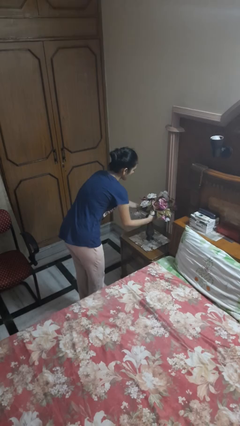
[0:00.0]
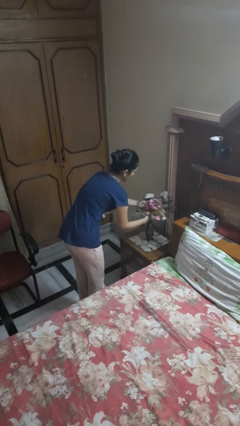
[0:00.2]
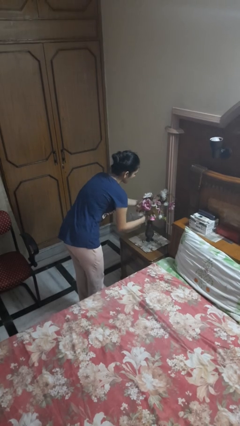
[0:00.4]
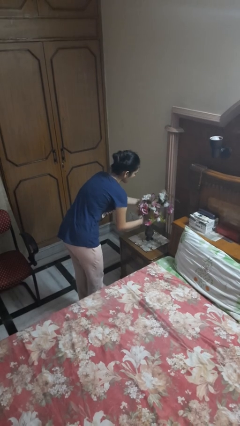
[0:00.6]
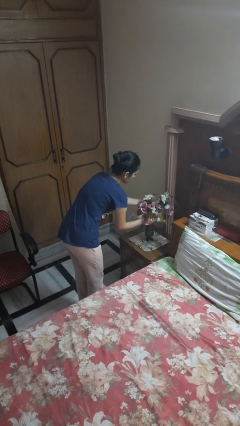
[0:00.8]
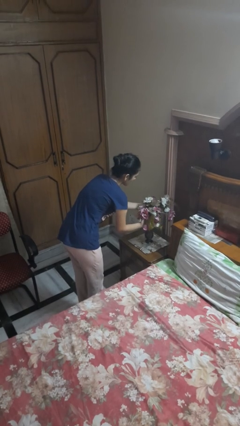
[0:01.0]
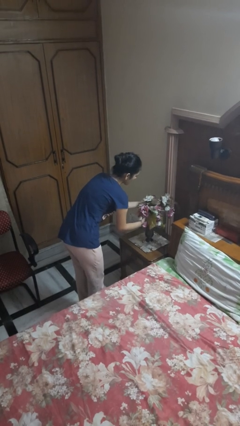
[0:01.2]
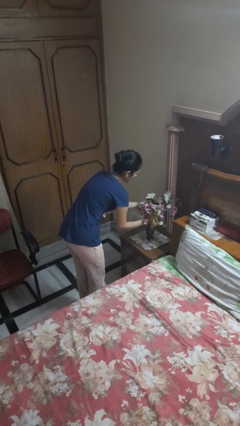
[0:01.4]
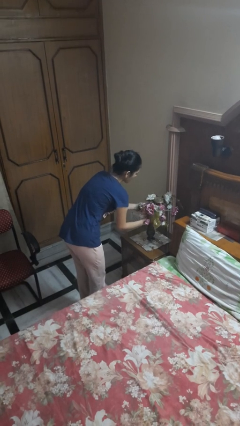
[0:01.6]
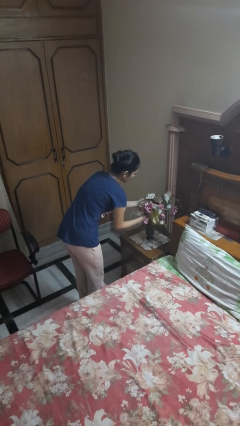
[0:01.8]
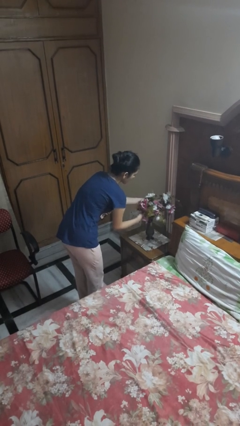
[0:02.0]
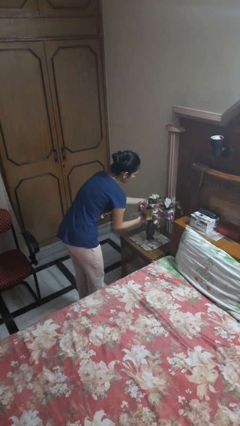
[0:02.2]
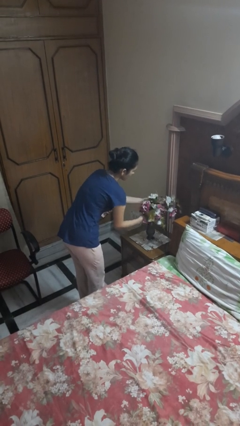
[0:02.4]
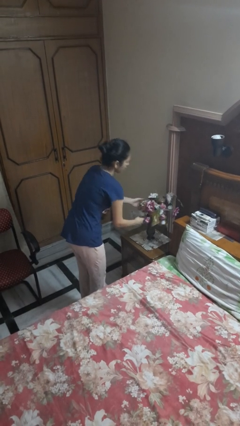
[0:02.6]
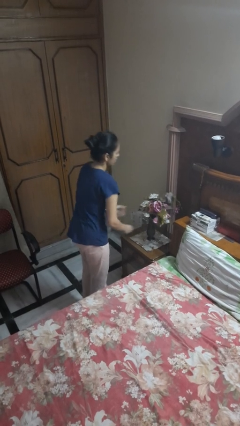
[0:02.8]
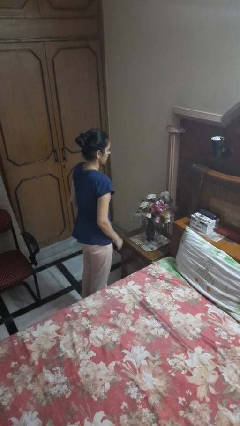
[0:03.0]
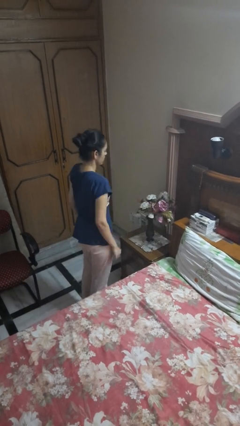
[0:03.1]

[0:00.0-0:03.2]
person arranges flowers in vase

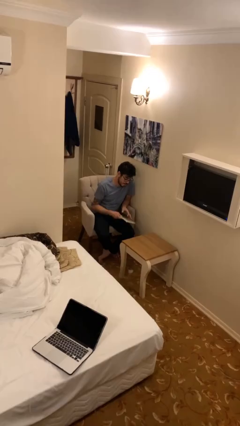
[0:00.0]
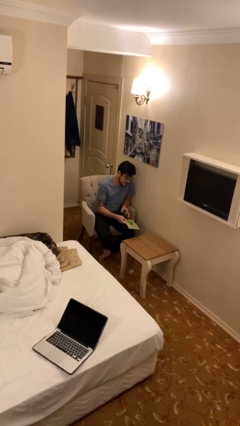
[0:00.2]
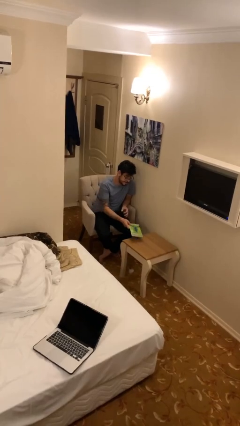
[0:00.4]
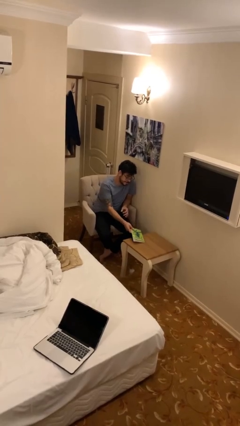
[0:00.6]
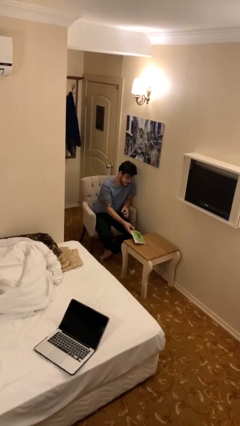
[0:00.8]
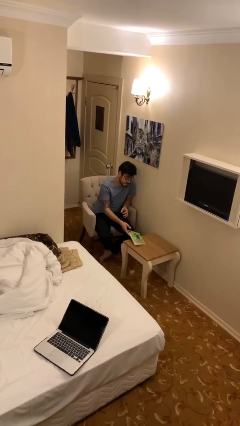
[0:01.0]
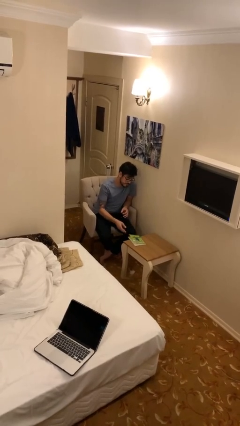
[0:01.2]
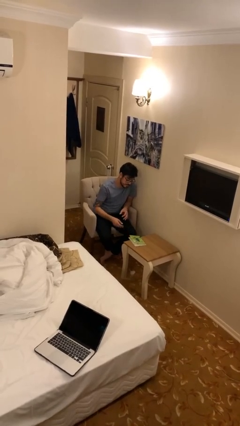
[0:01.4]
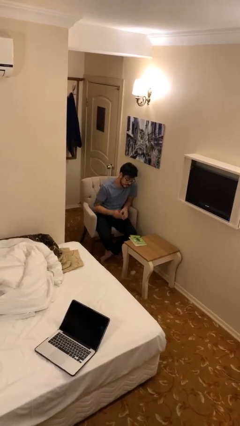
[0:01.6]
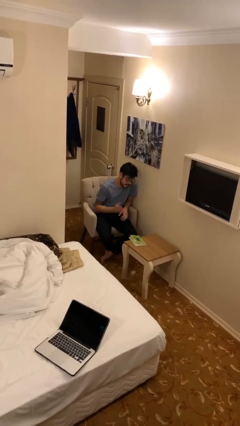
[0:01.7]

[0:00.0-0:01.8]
person puts down object on table

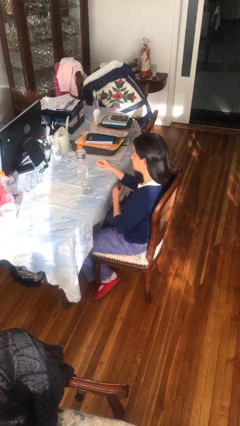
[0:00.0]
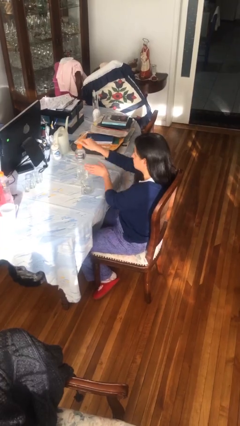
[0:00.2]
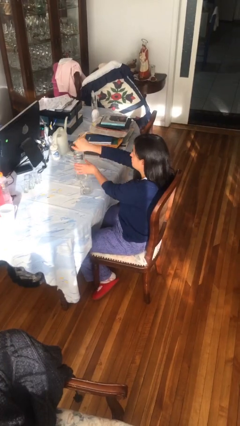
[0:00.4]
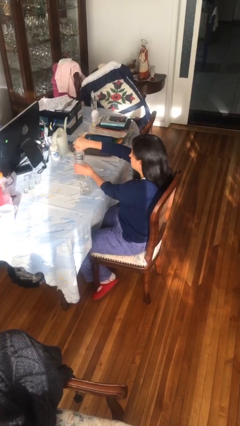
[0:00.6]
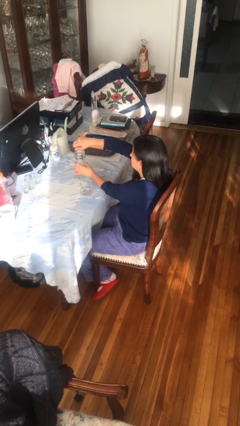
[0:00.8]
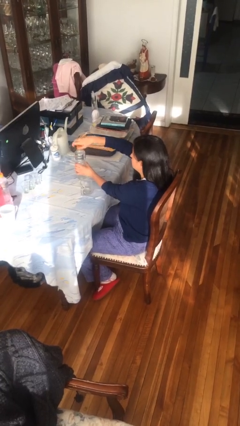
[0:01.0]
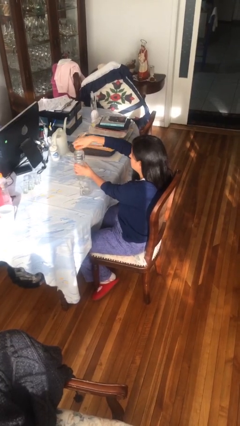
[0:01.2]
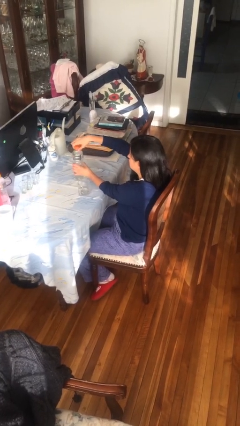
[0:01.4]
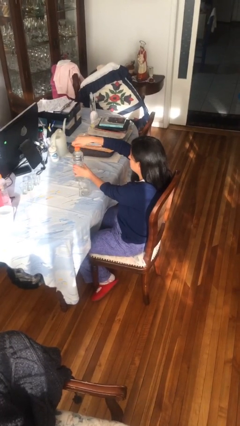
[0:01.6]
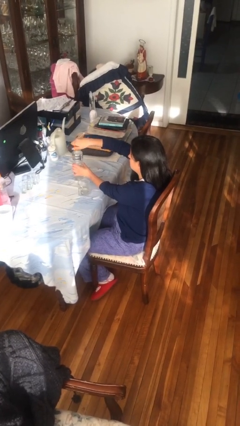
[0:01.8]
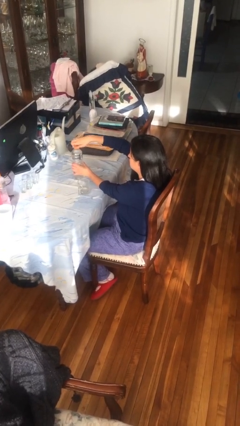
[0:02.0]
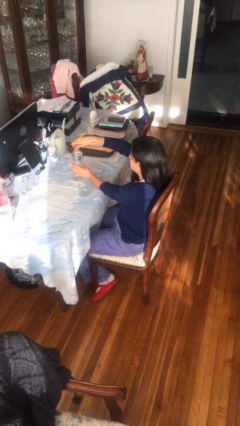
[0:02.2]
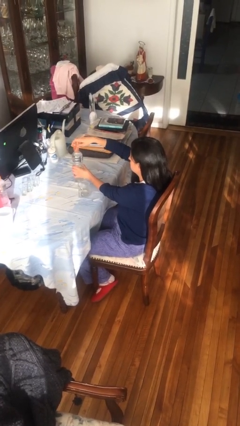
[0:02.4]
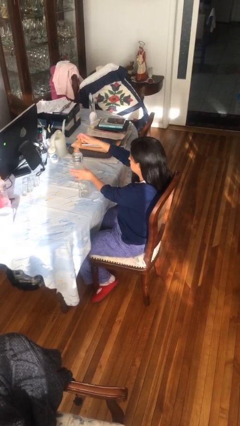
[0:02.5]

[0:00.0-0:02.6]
person unscrews lid from bottle

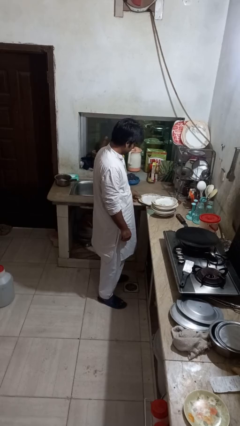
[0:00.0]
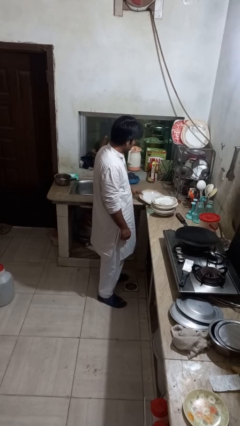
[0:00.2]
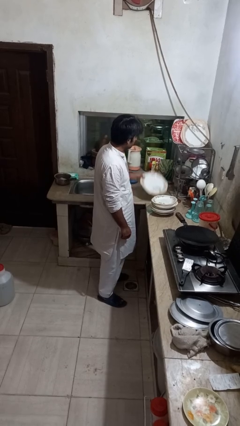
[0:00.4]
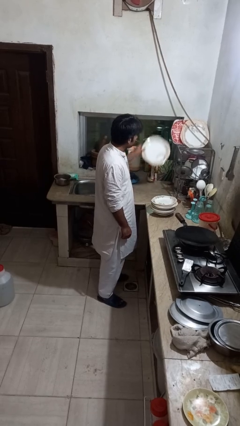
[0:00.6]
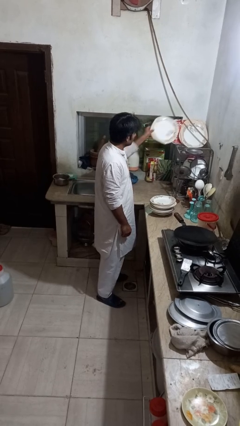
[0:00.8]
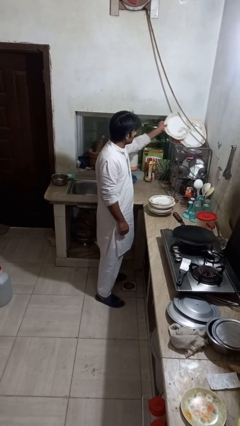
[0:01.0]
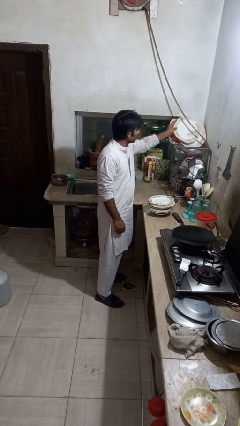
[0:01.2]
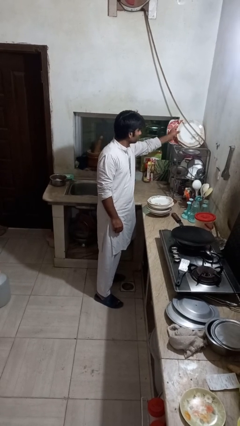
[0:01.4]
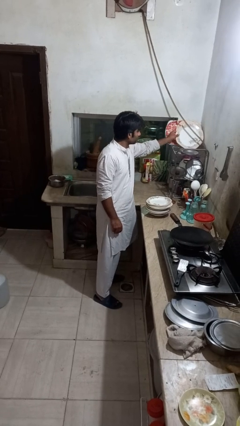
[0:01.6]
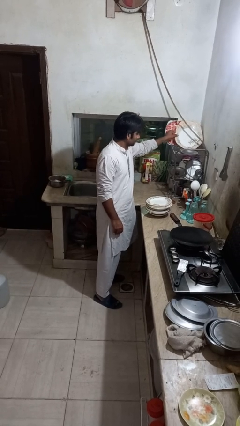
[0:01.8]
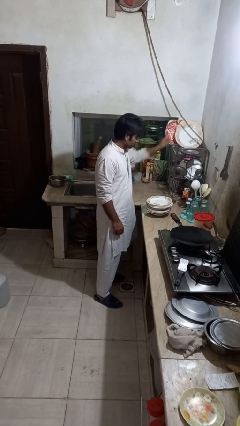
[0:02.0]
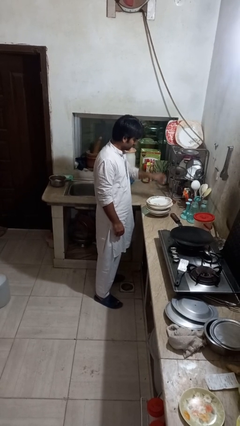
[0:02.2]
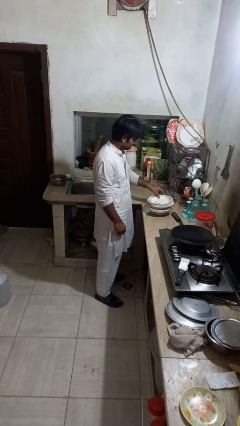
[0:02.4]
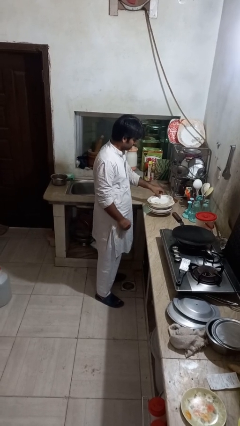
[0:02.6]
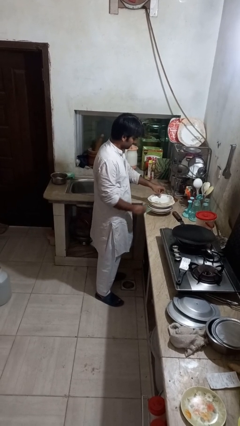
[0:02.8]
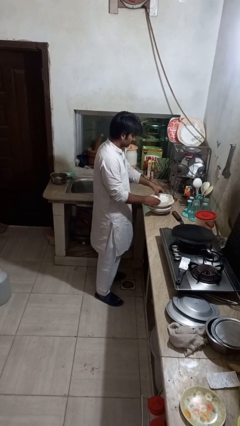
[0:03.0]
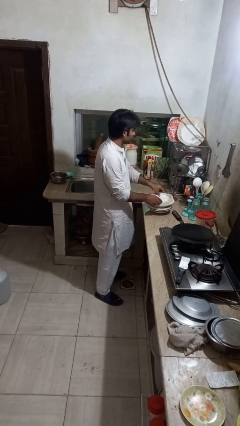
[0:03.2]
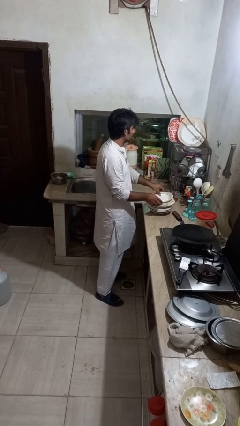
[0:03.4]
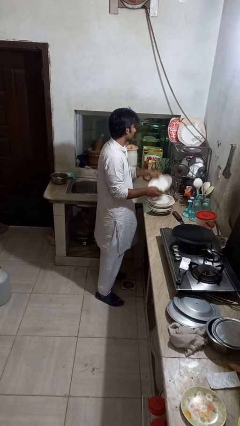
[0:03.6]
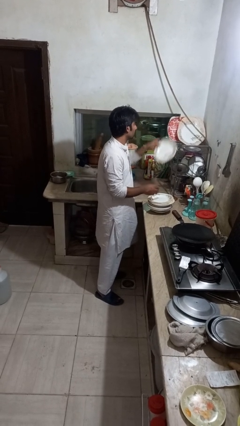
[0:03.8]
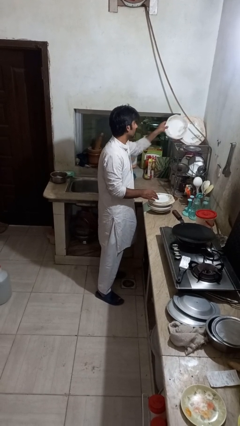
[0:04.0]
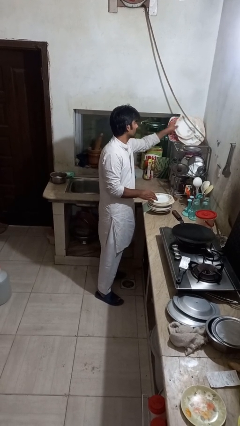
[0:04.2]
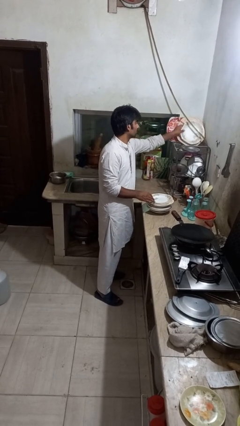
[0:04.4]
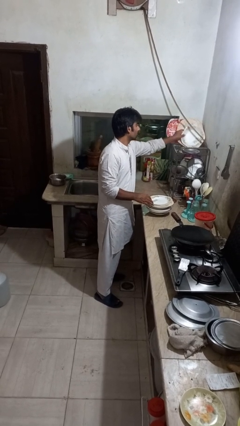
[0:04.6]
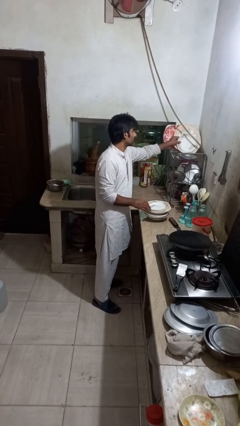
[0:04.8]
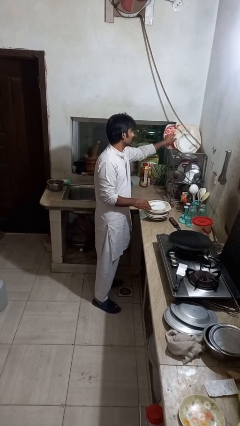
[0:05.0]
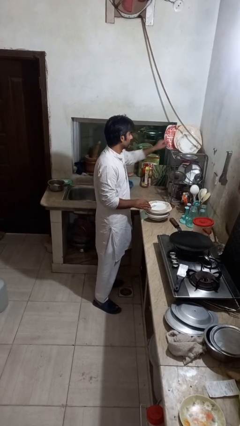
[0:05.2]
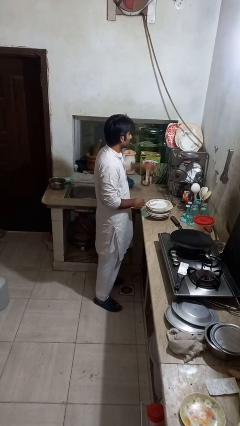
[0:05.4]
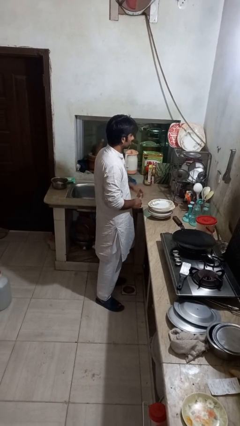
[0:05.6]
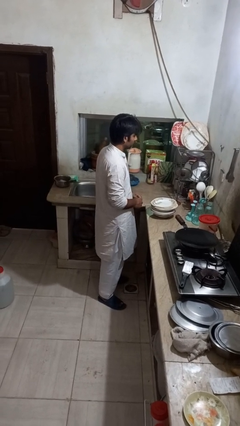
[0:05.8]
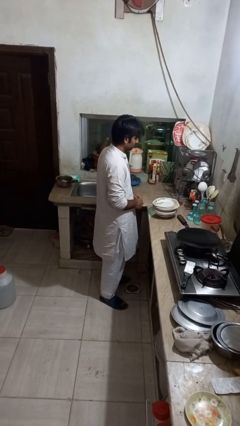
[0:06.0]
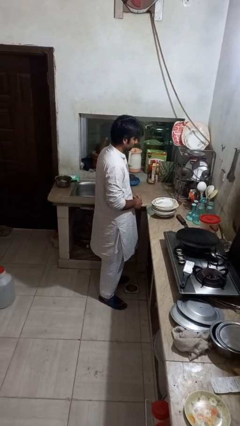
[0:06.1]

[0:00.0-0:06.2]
person loads dishwasher

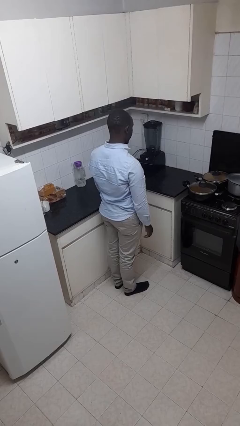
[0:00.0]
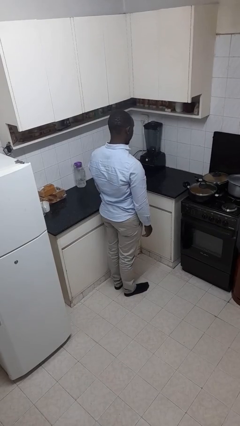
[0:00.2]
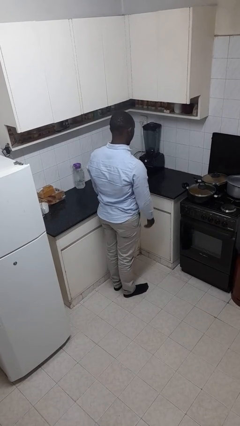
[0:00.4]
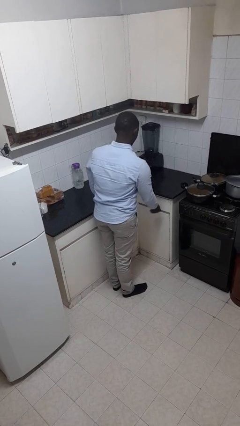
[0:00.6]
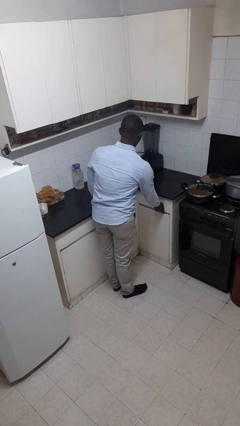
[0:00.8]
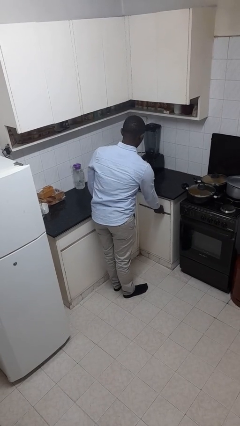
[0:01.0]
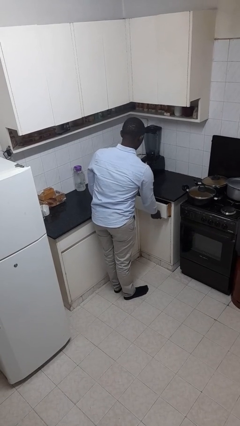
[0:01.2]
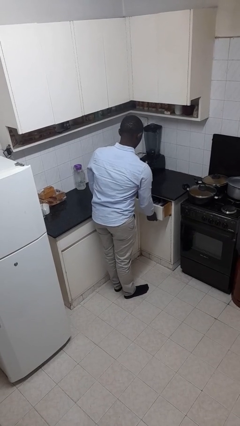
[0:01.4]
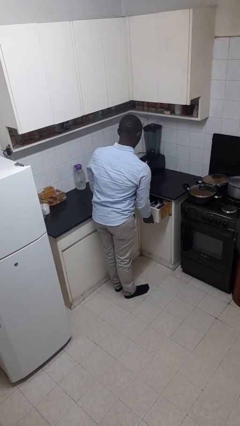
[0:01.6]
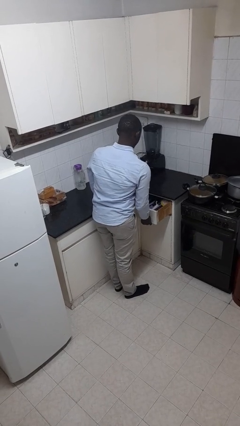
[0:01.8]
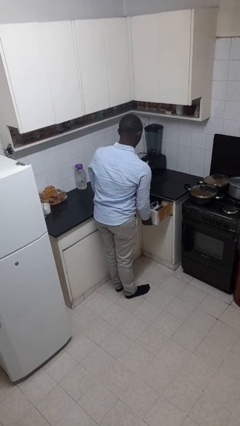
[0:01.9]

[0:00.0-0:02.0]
person opens kitchen drawer

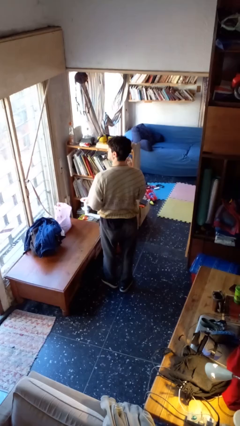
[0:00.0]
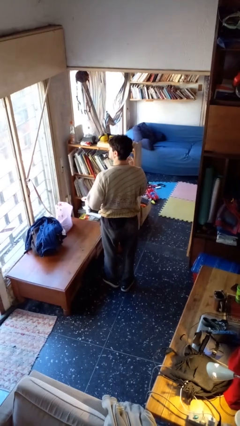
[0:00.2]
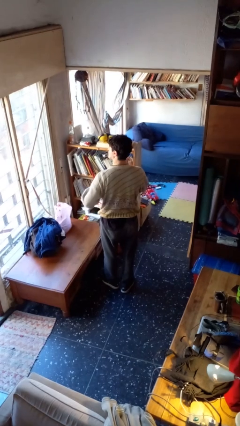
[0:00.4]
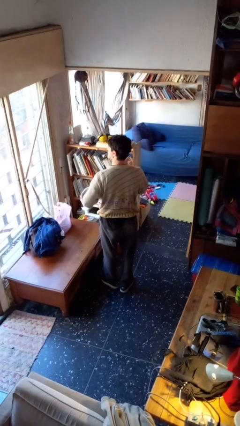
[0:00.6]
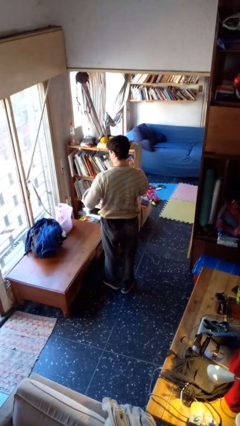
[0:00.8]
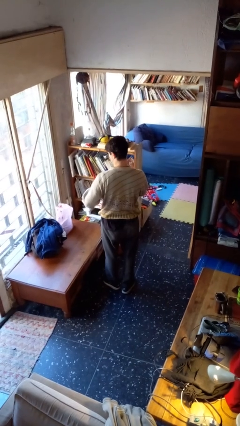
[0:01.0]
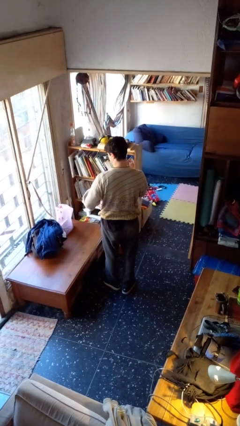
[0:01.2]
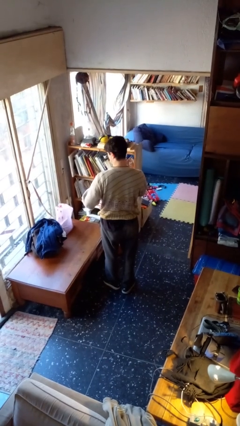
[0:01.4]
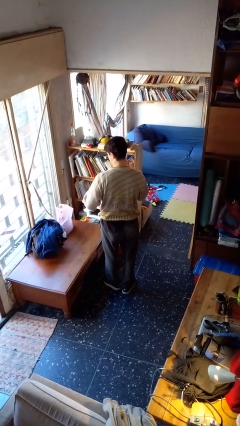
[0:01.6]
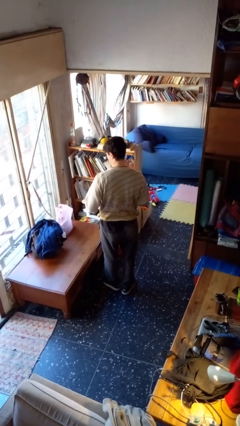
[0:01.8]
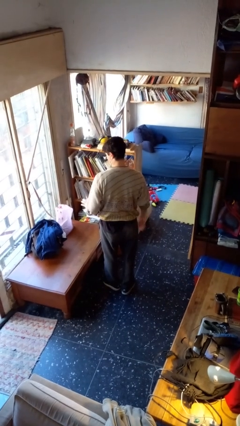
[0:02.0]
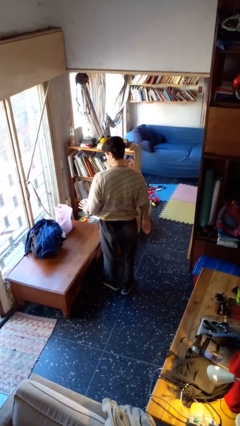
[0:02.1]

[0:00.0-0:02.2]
person puts on ring
